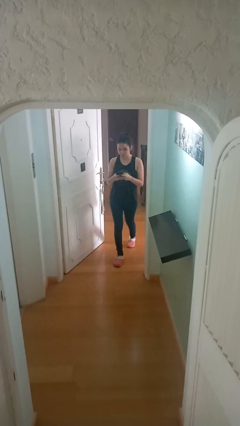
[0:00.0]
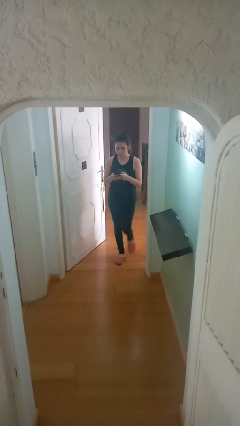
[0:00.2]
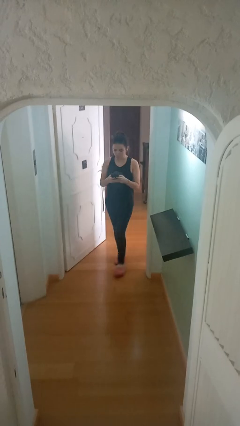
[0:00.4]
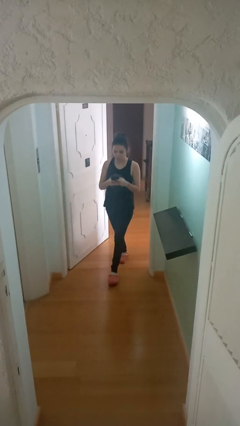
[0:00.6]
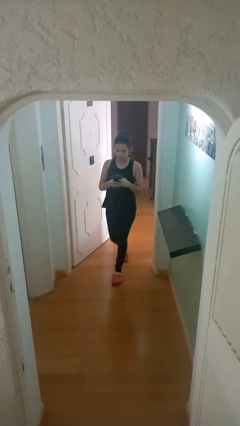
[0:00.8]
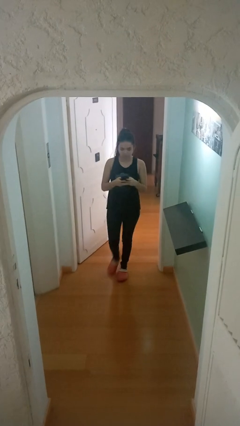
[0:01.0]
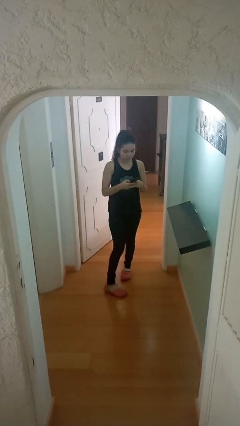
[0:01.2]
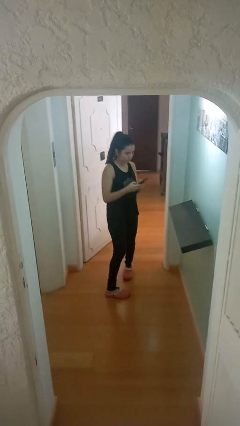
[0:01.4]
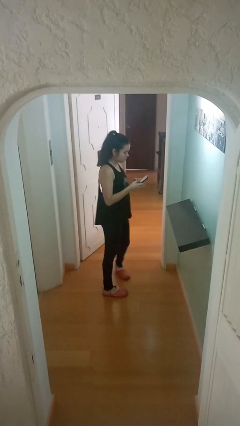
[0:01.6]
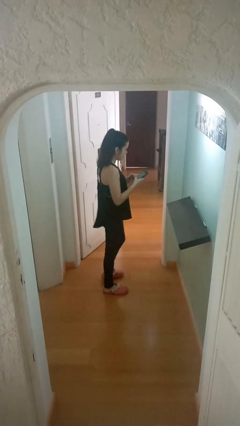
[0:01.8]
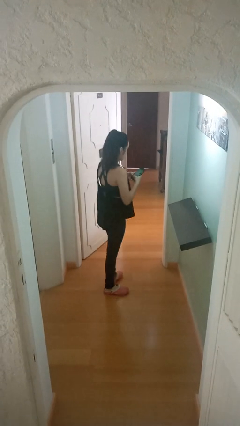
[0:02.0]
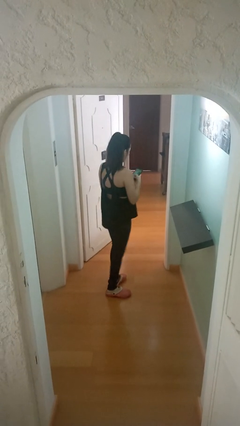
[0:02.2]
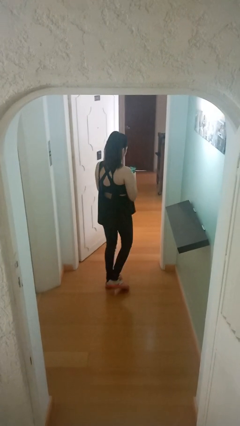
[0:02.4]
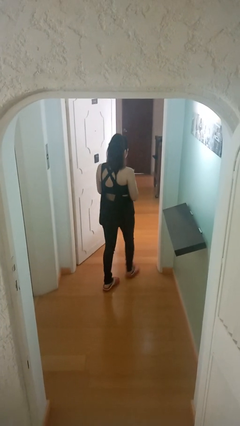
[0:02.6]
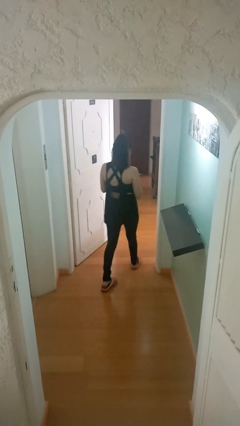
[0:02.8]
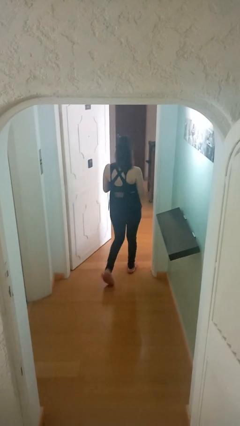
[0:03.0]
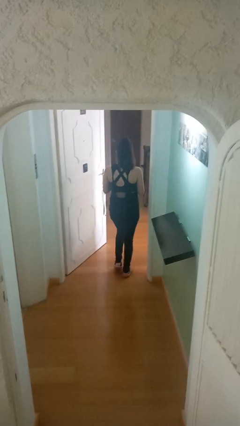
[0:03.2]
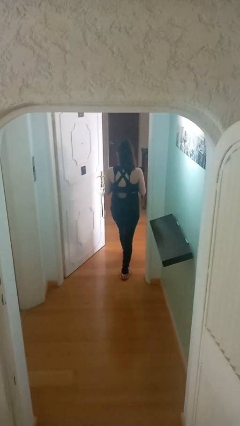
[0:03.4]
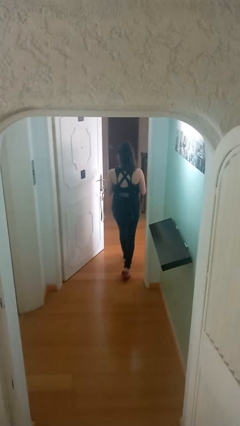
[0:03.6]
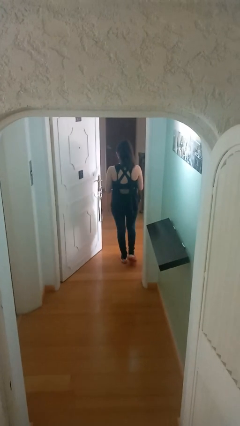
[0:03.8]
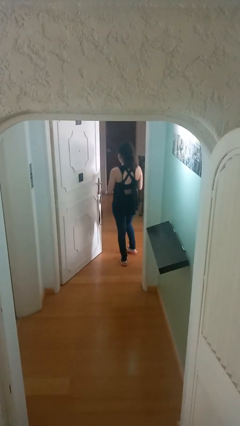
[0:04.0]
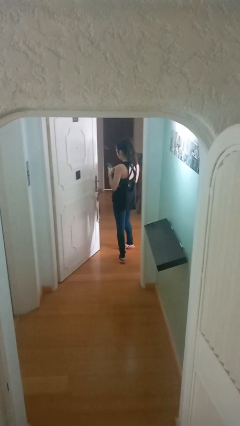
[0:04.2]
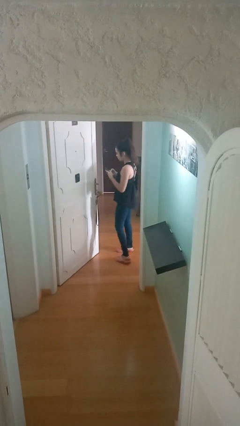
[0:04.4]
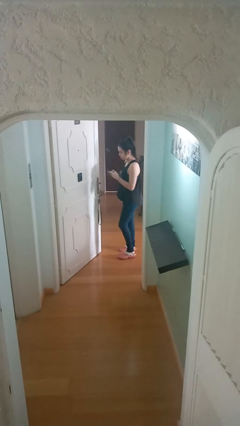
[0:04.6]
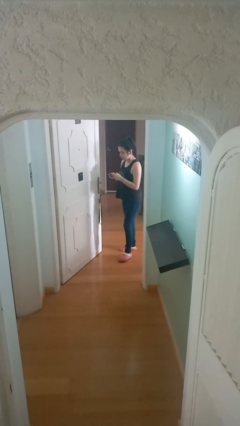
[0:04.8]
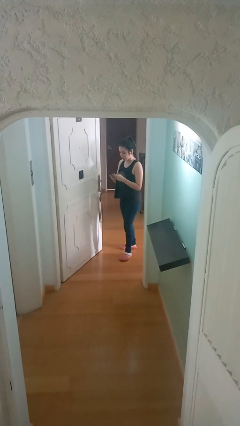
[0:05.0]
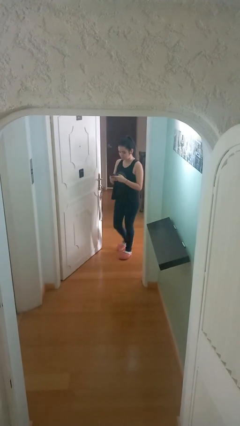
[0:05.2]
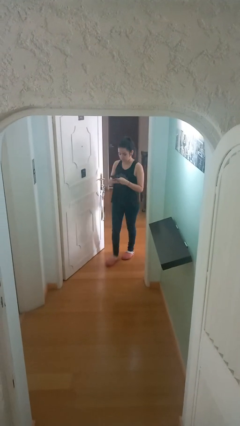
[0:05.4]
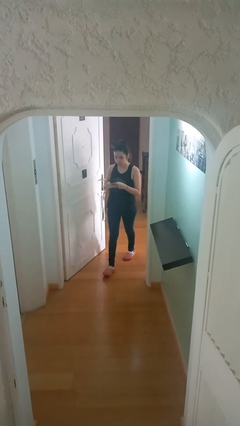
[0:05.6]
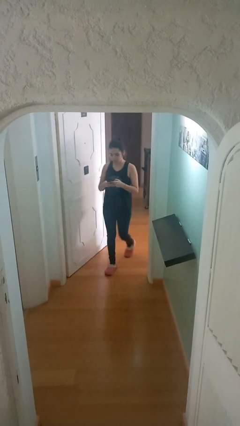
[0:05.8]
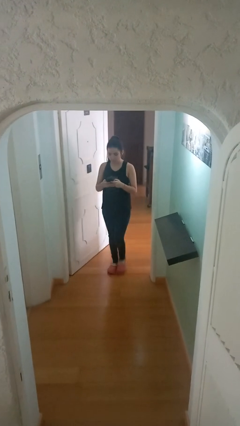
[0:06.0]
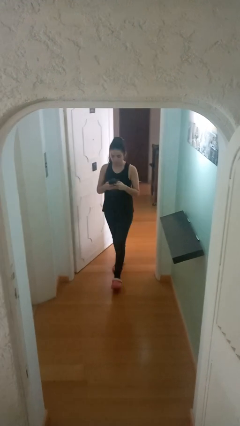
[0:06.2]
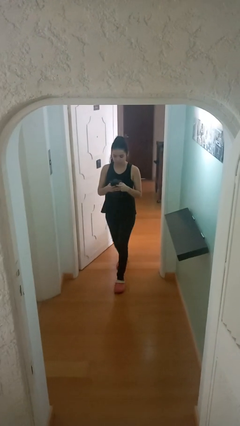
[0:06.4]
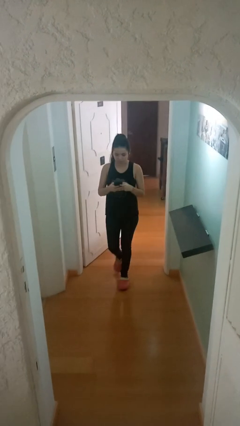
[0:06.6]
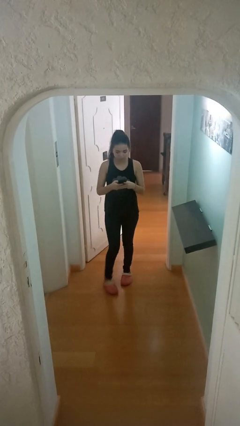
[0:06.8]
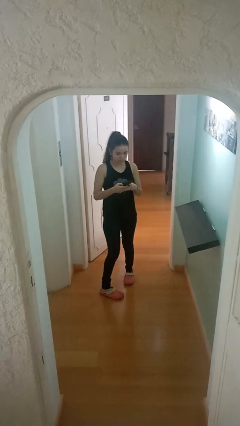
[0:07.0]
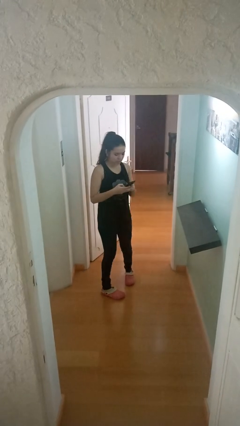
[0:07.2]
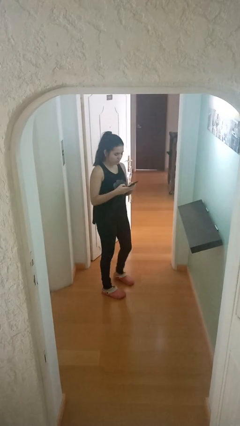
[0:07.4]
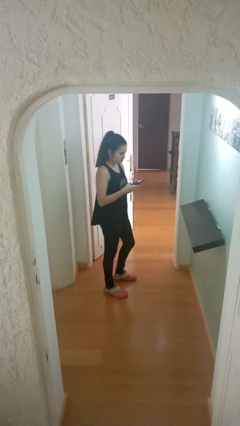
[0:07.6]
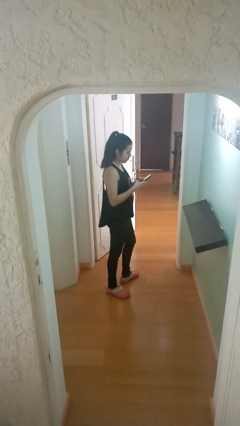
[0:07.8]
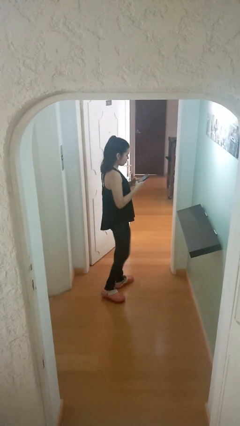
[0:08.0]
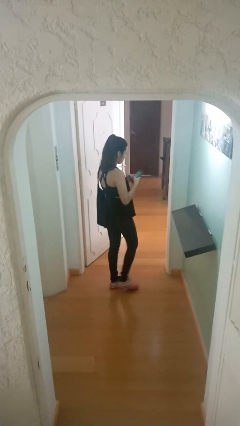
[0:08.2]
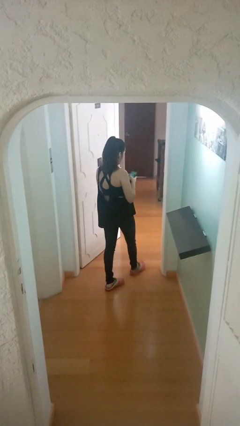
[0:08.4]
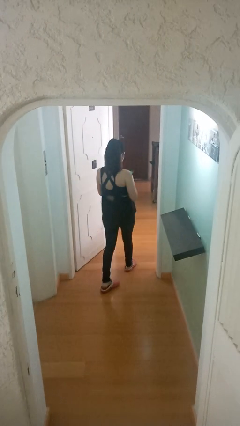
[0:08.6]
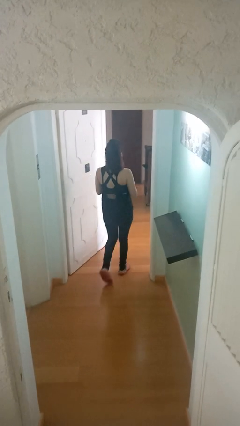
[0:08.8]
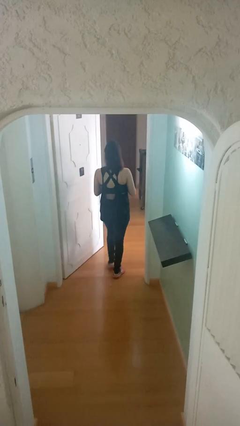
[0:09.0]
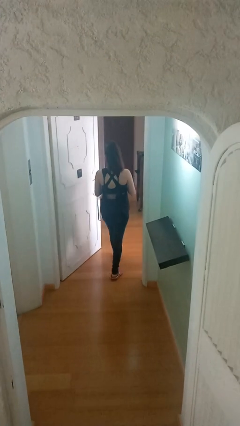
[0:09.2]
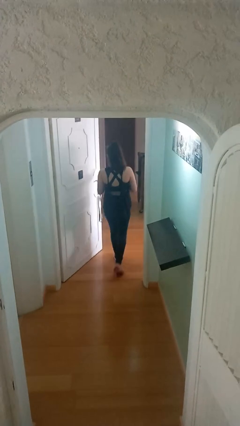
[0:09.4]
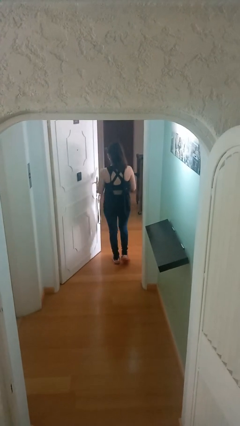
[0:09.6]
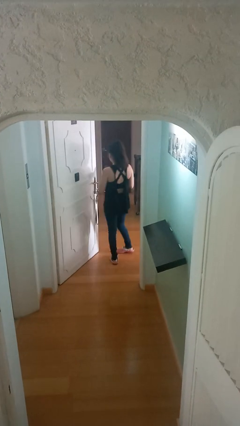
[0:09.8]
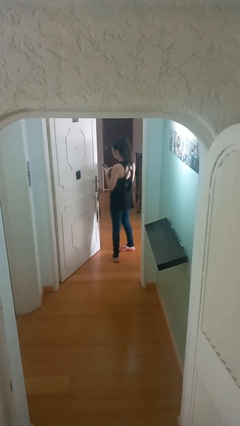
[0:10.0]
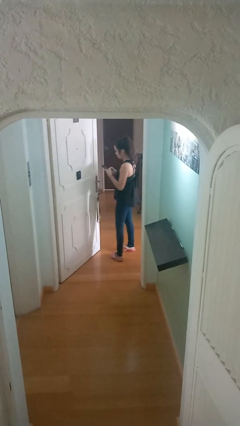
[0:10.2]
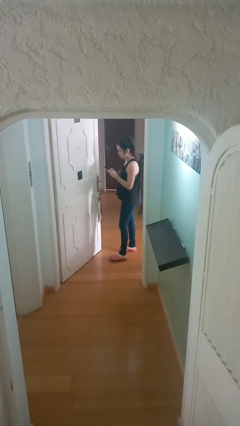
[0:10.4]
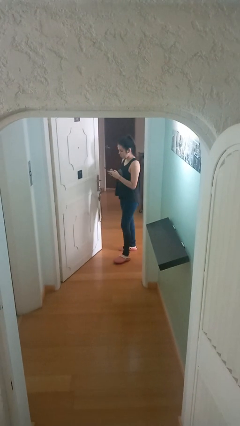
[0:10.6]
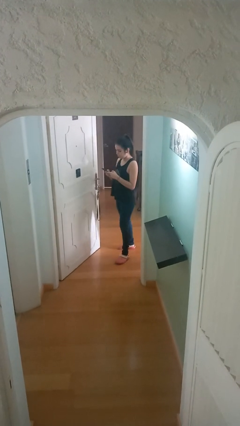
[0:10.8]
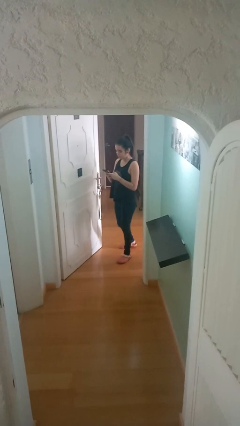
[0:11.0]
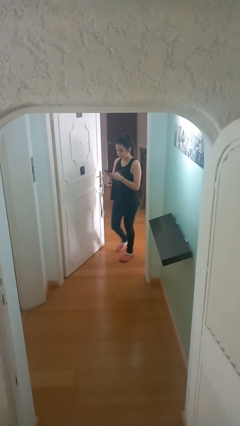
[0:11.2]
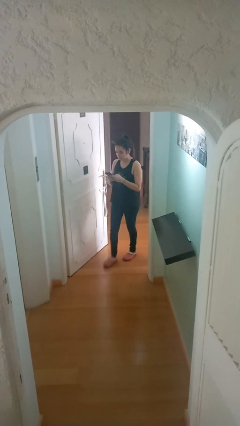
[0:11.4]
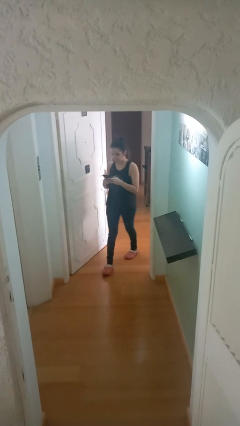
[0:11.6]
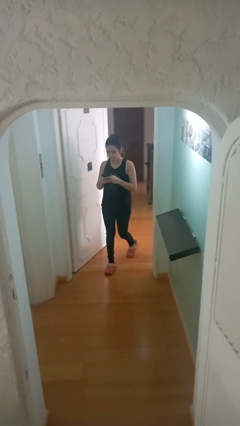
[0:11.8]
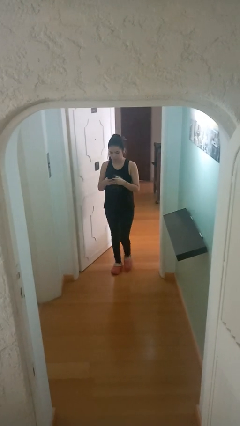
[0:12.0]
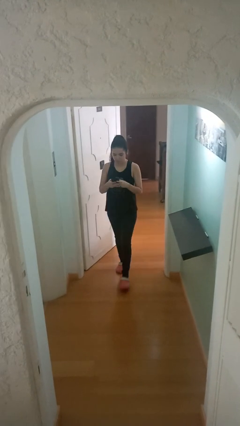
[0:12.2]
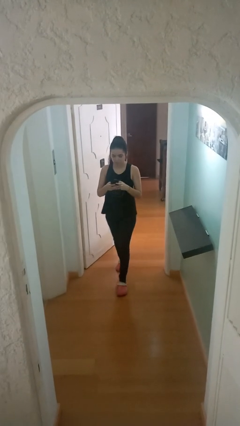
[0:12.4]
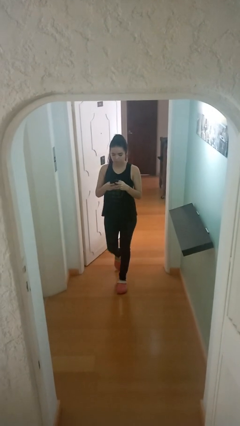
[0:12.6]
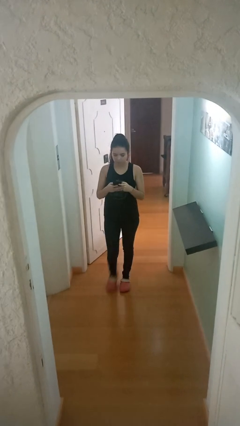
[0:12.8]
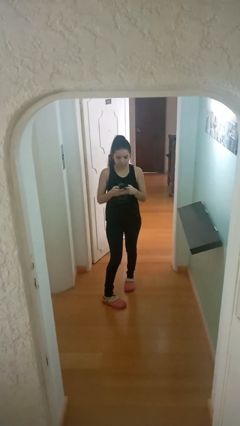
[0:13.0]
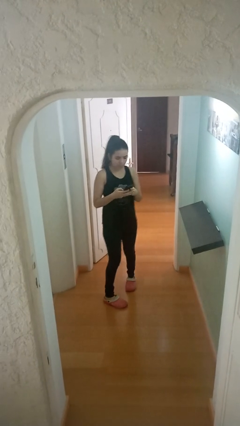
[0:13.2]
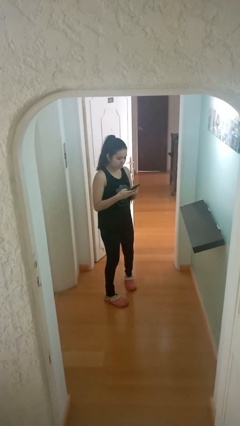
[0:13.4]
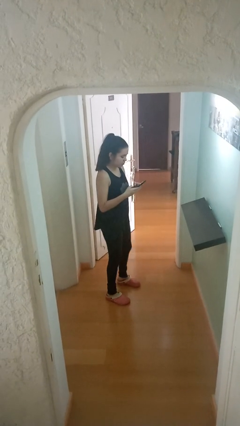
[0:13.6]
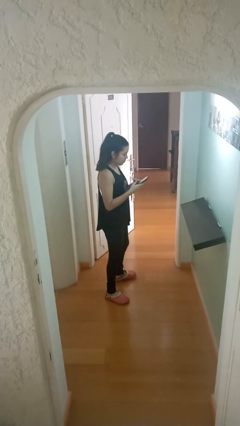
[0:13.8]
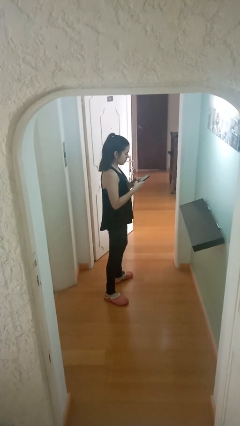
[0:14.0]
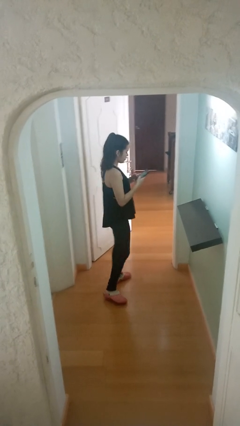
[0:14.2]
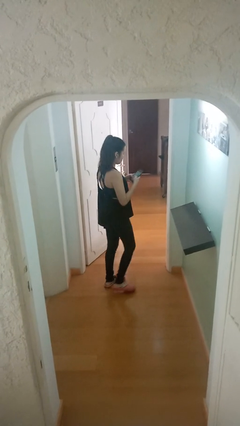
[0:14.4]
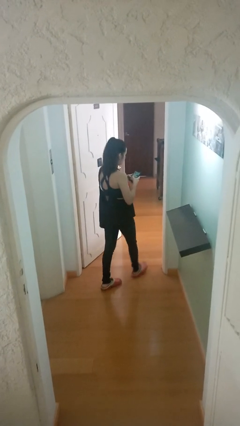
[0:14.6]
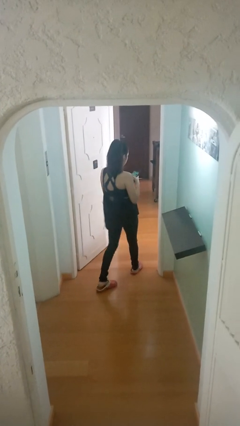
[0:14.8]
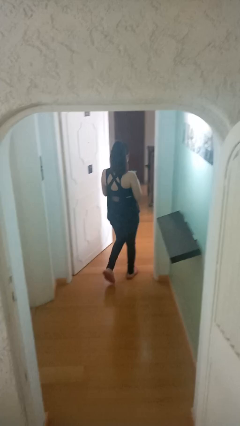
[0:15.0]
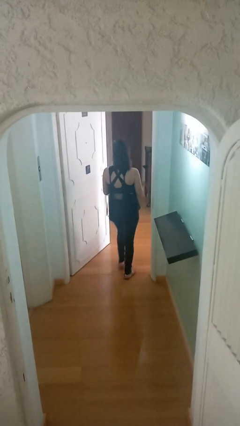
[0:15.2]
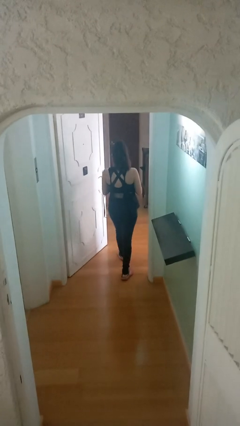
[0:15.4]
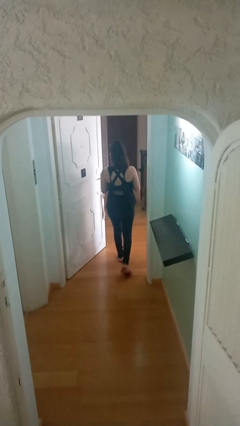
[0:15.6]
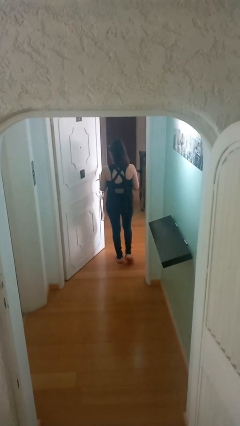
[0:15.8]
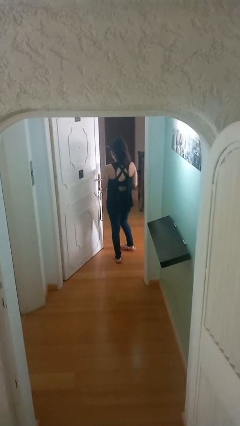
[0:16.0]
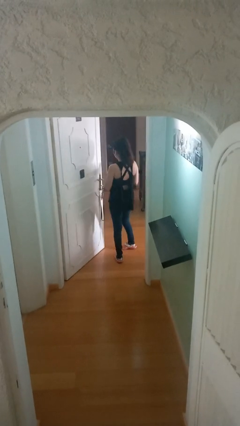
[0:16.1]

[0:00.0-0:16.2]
person texts on phone

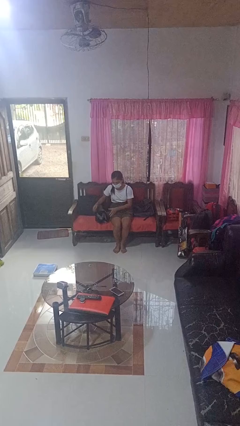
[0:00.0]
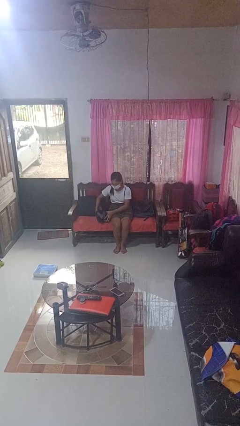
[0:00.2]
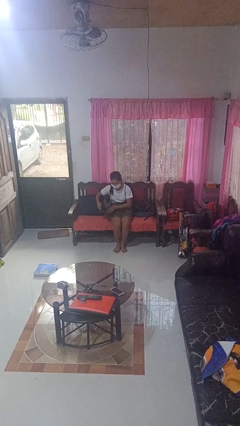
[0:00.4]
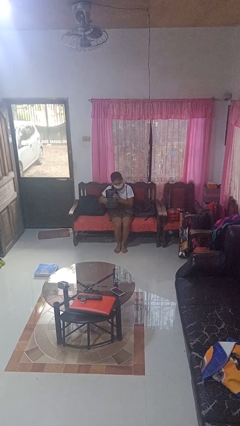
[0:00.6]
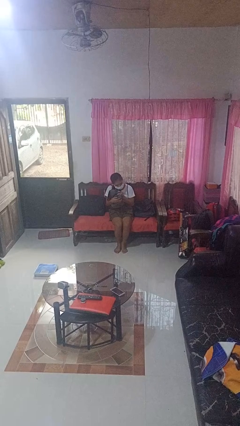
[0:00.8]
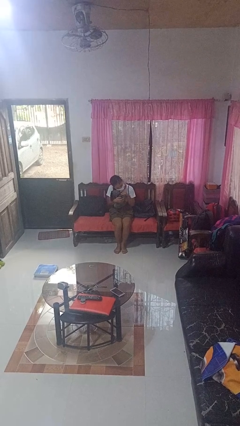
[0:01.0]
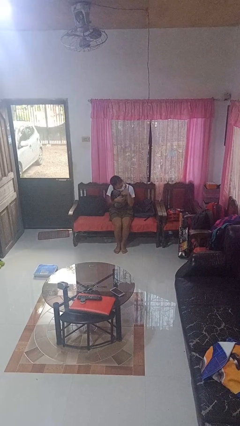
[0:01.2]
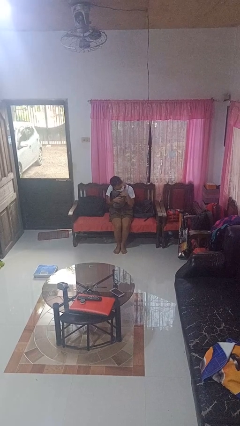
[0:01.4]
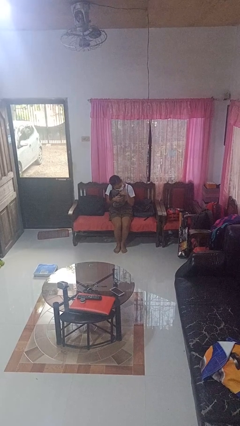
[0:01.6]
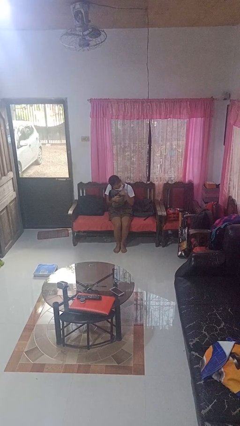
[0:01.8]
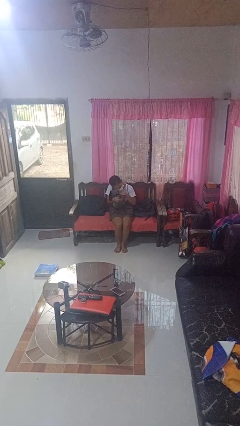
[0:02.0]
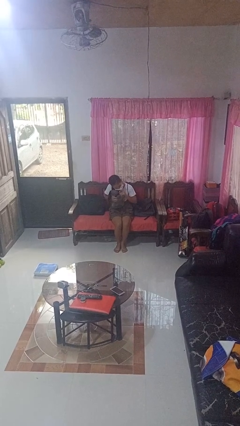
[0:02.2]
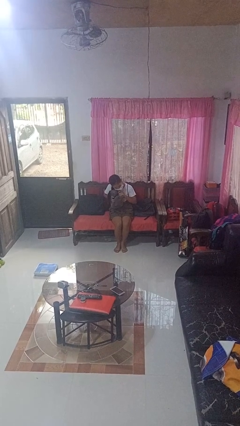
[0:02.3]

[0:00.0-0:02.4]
person hugs stuffed animal
